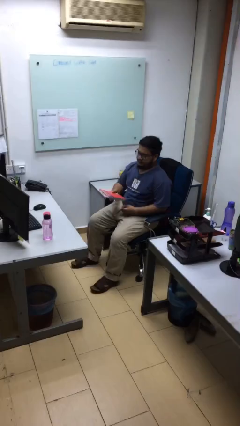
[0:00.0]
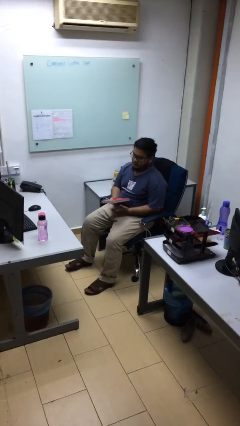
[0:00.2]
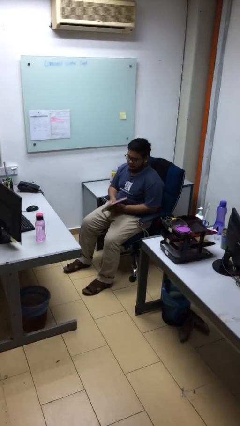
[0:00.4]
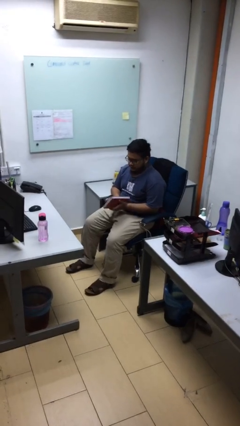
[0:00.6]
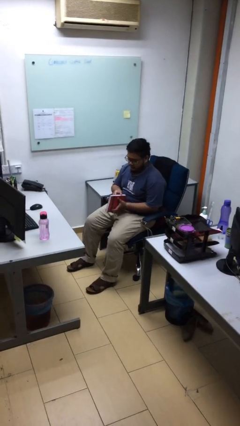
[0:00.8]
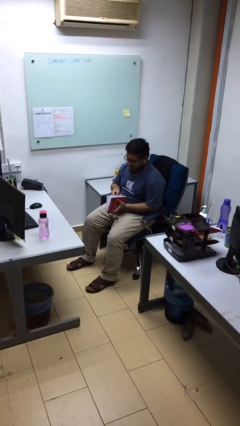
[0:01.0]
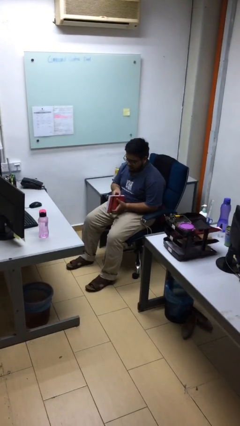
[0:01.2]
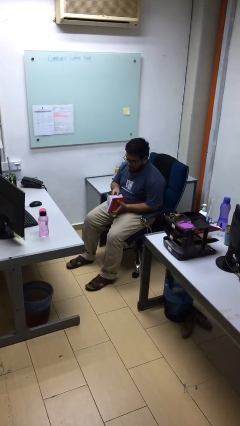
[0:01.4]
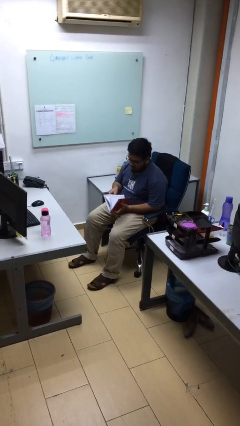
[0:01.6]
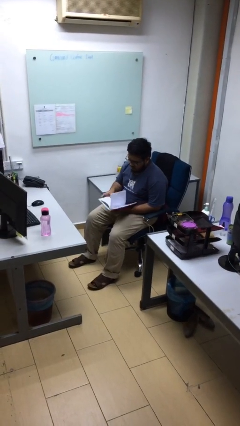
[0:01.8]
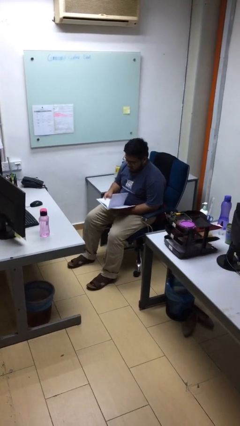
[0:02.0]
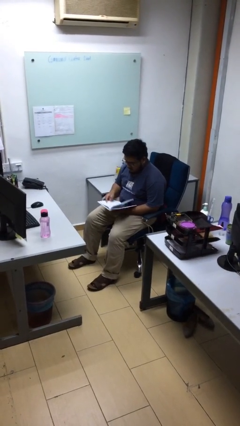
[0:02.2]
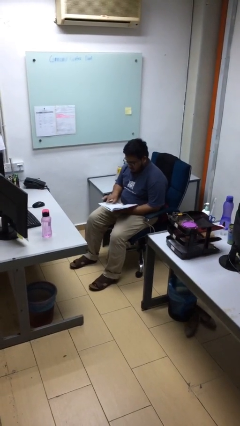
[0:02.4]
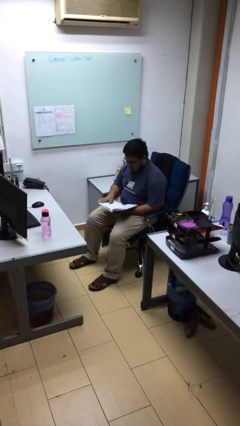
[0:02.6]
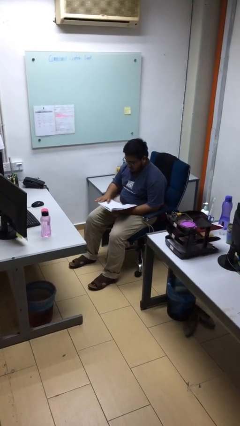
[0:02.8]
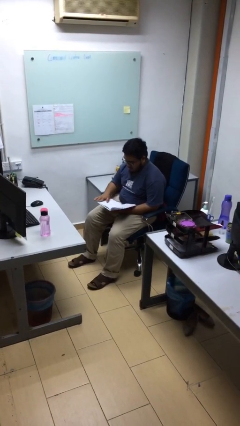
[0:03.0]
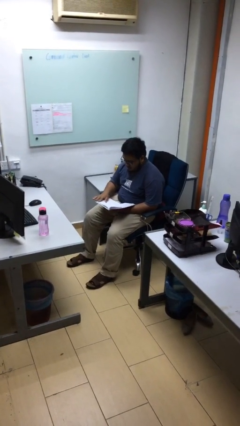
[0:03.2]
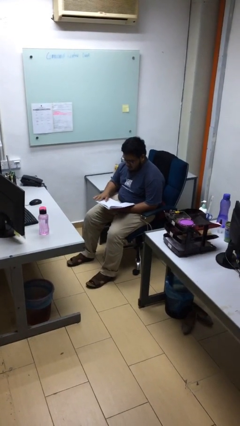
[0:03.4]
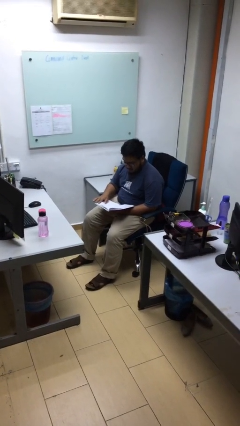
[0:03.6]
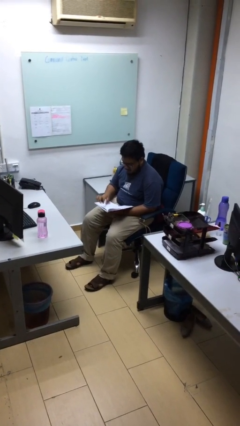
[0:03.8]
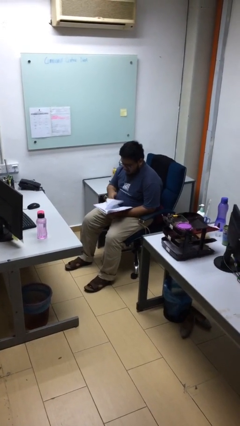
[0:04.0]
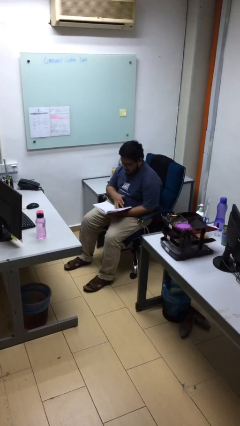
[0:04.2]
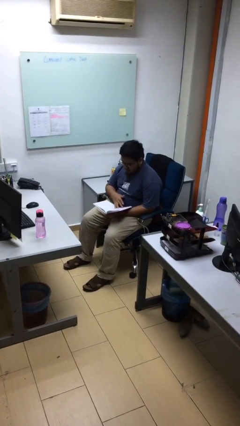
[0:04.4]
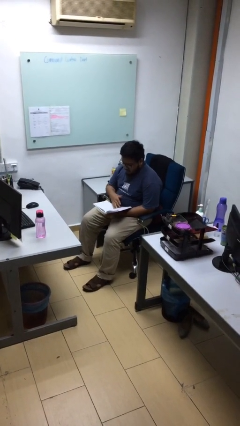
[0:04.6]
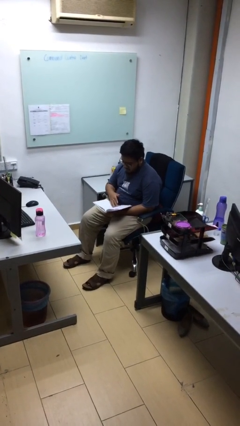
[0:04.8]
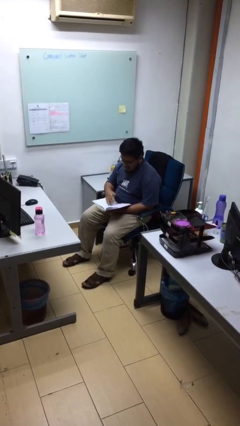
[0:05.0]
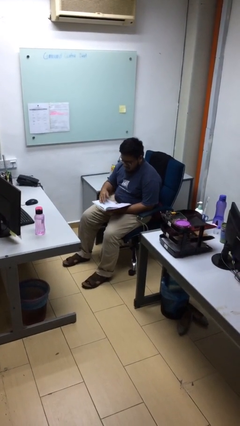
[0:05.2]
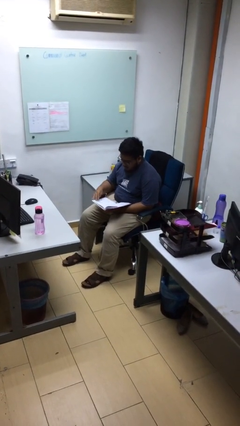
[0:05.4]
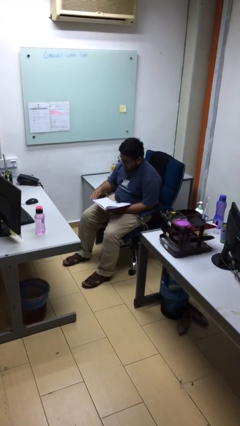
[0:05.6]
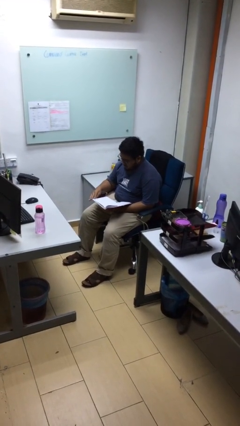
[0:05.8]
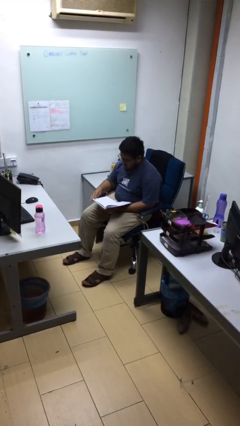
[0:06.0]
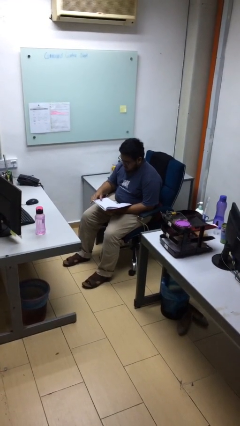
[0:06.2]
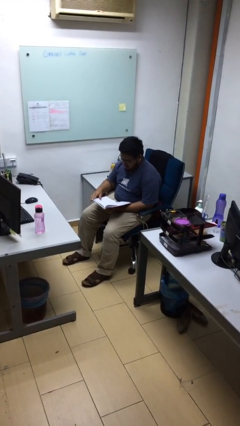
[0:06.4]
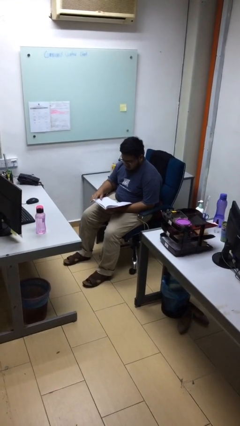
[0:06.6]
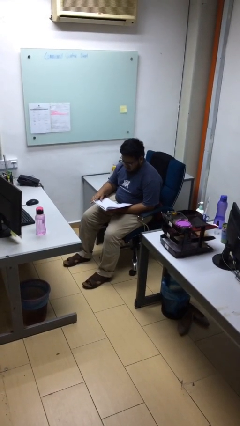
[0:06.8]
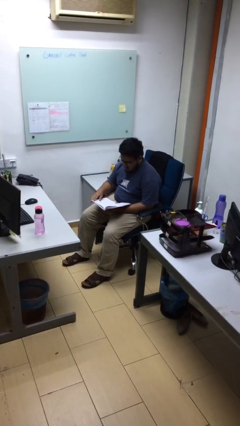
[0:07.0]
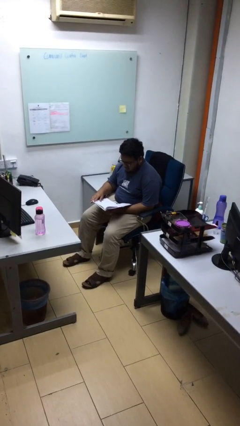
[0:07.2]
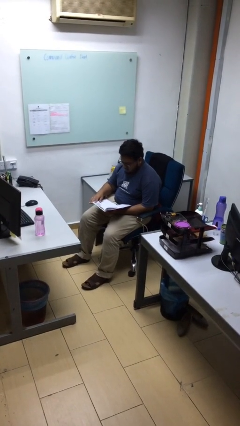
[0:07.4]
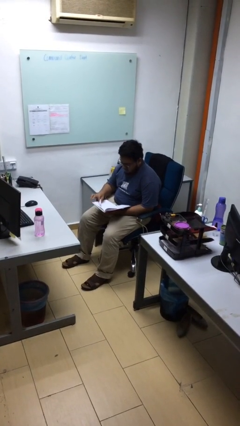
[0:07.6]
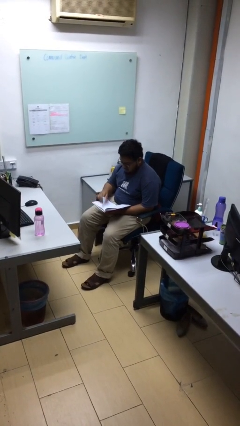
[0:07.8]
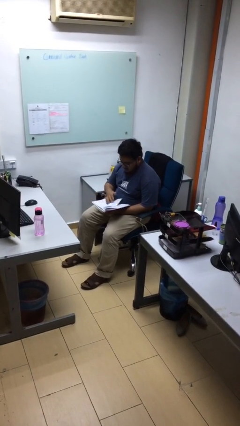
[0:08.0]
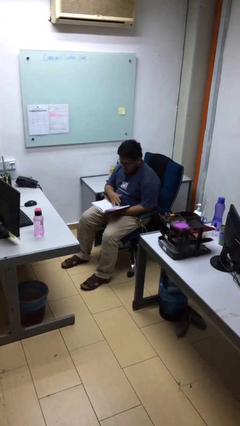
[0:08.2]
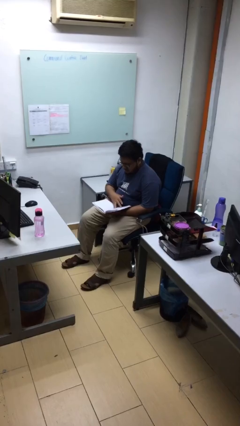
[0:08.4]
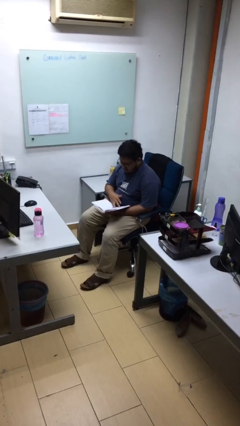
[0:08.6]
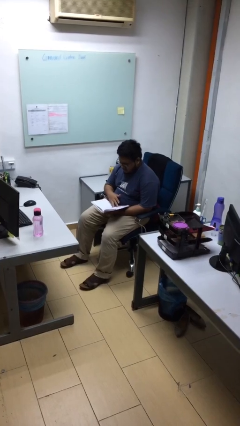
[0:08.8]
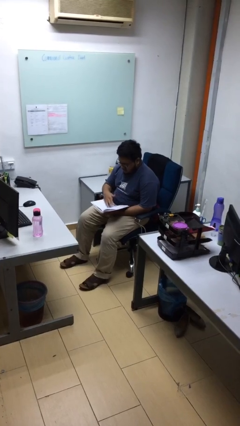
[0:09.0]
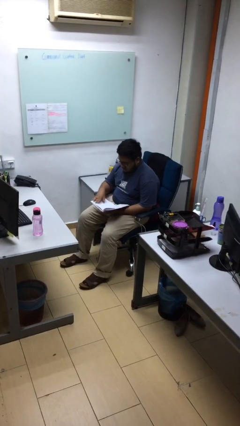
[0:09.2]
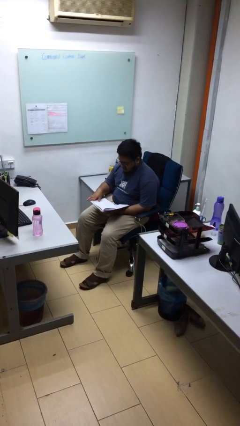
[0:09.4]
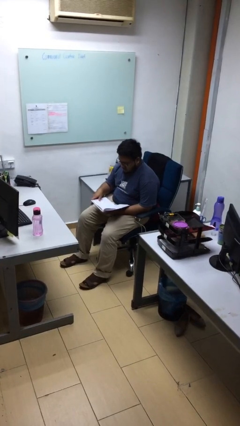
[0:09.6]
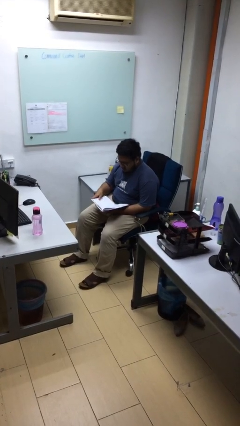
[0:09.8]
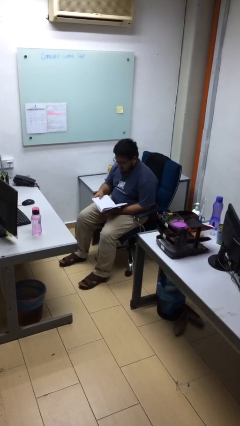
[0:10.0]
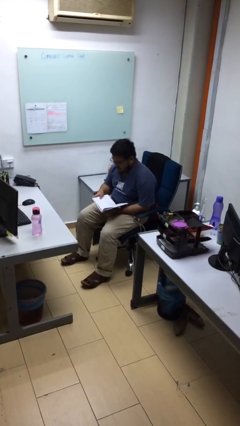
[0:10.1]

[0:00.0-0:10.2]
person reads document

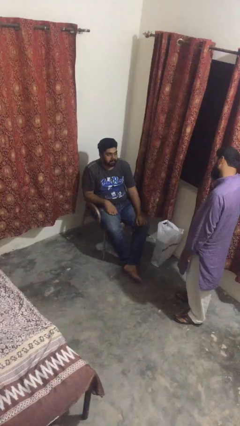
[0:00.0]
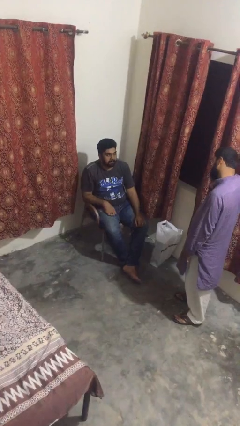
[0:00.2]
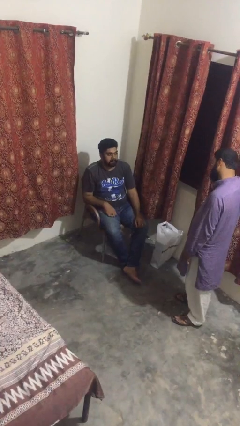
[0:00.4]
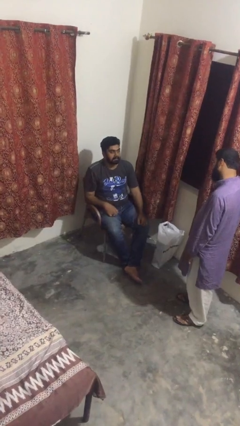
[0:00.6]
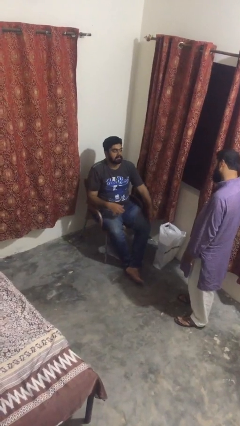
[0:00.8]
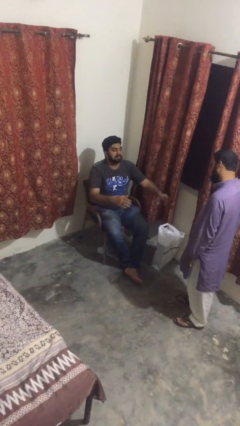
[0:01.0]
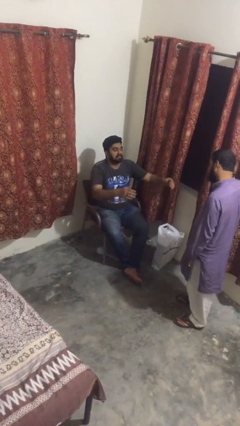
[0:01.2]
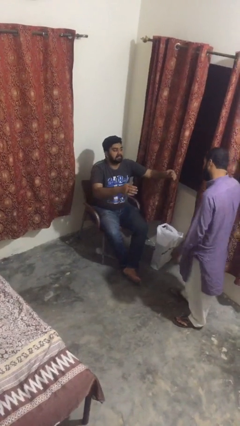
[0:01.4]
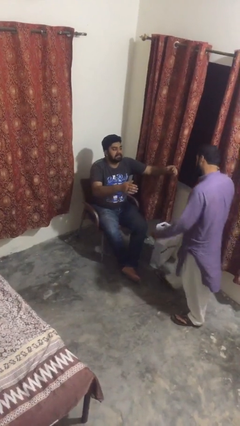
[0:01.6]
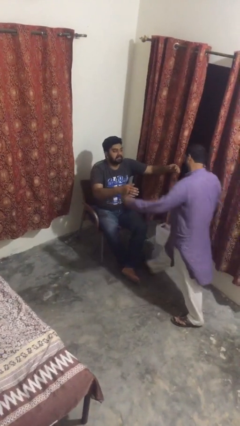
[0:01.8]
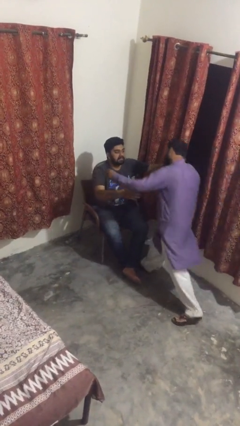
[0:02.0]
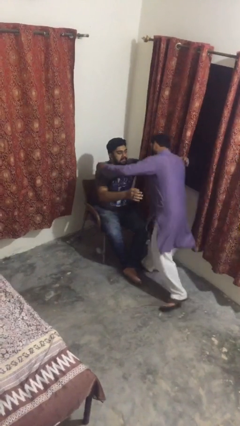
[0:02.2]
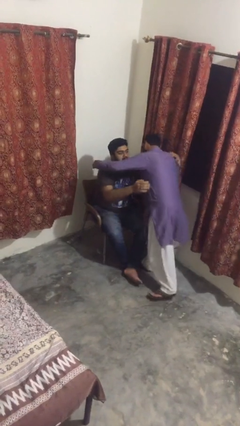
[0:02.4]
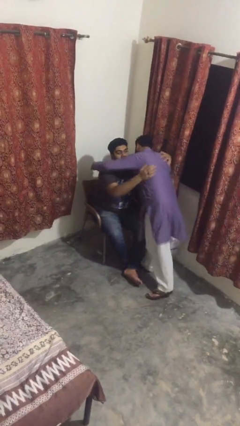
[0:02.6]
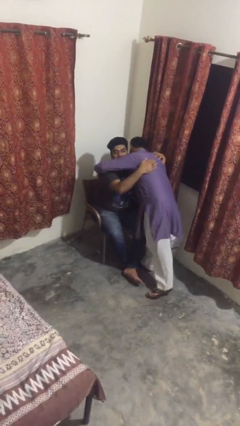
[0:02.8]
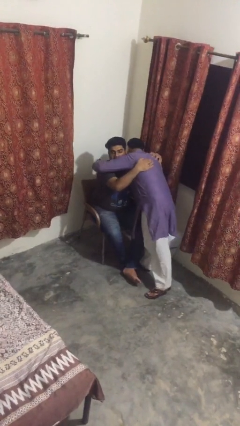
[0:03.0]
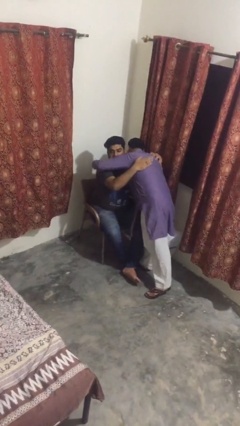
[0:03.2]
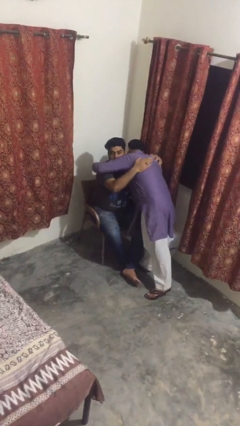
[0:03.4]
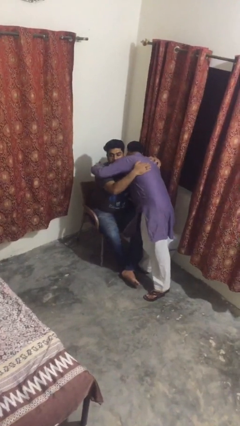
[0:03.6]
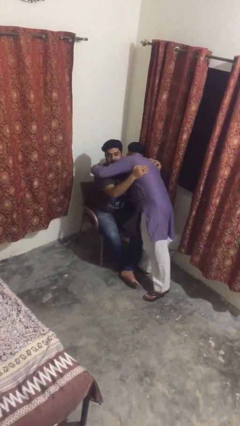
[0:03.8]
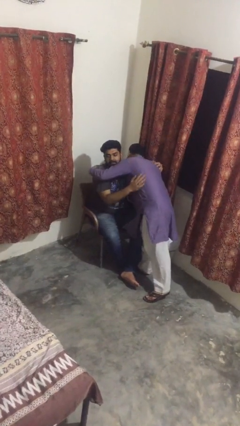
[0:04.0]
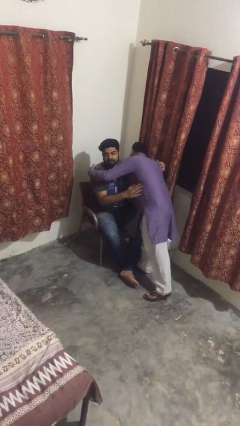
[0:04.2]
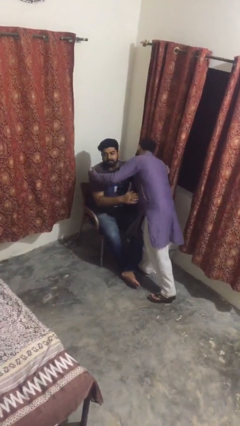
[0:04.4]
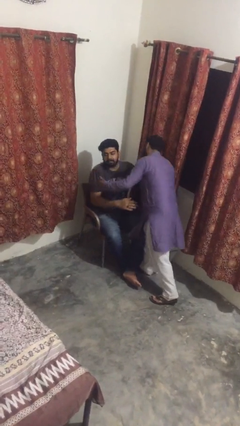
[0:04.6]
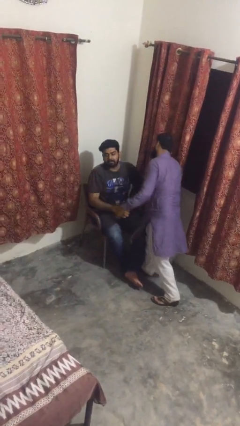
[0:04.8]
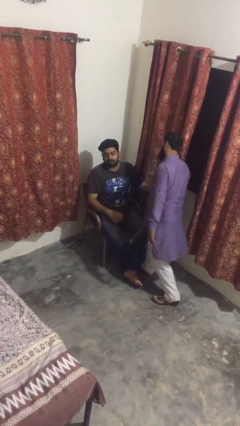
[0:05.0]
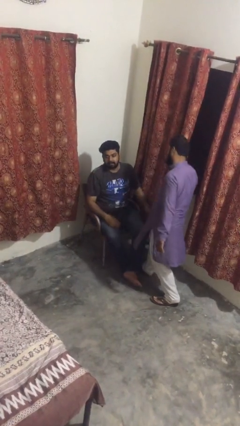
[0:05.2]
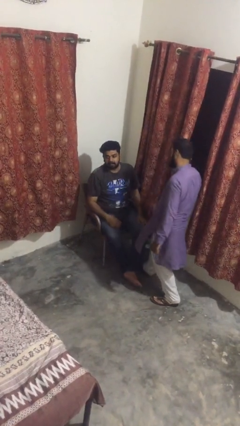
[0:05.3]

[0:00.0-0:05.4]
person embraces person

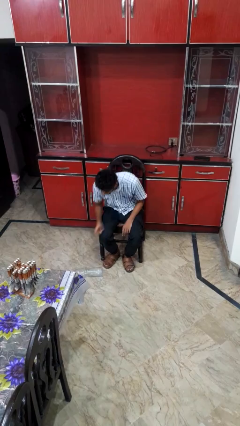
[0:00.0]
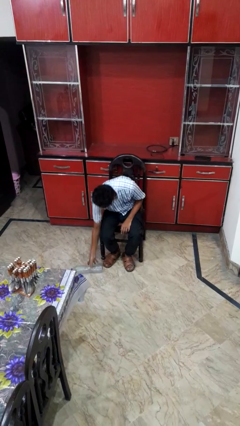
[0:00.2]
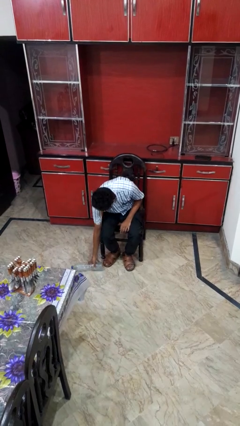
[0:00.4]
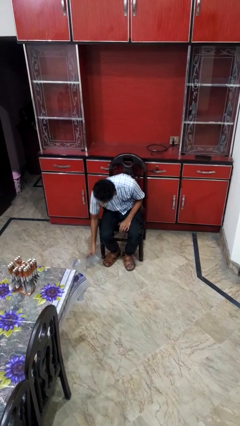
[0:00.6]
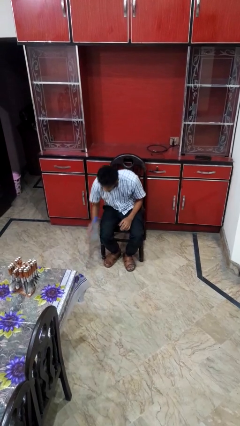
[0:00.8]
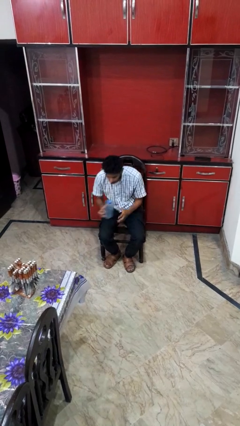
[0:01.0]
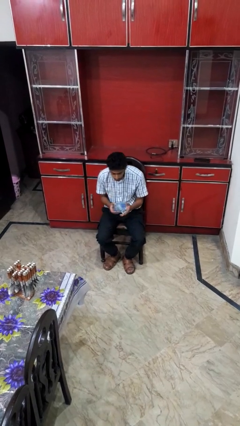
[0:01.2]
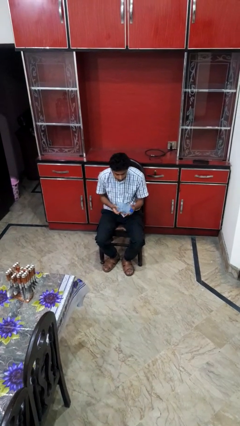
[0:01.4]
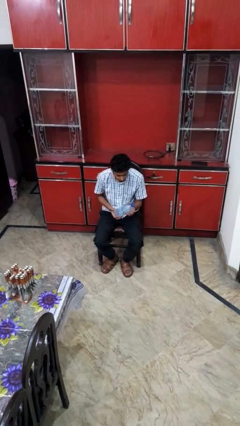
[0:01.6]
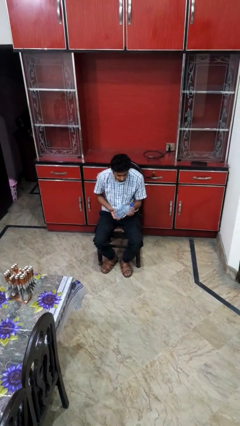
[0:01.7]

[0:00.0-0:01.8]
person picks up object from floor

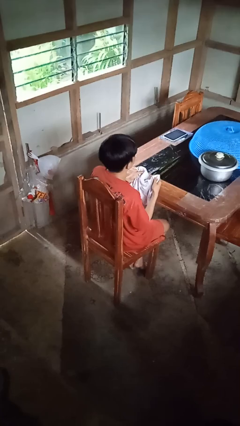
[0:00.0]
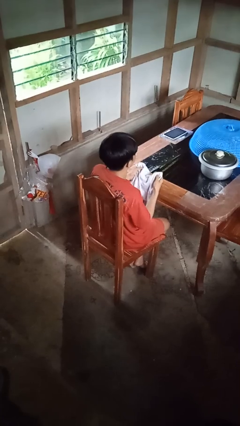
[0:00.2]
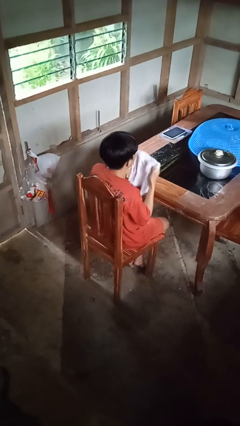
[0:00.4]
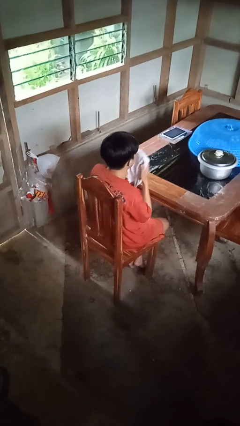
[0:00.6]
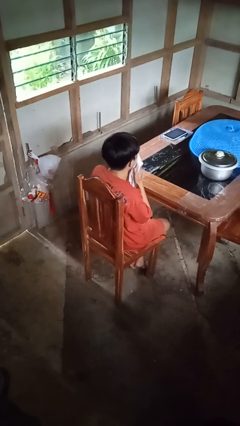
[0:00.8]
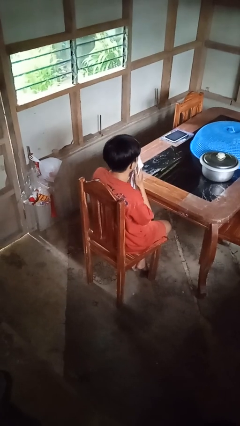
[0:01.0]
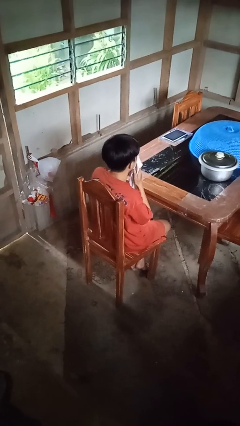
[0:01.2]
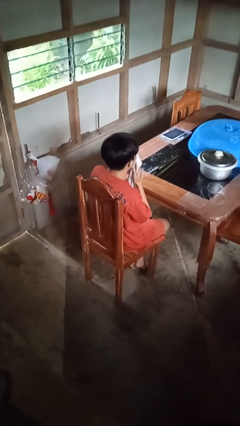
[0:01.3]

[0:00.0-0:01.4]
person wipes mouth with napkin
